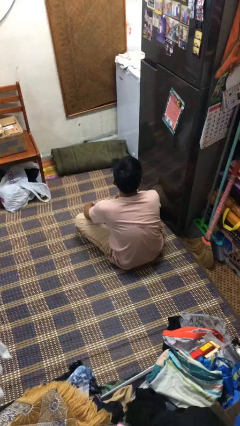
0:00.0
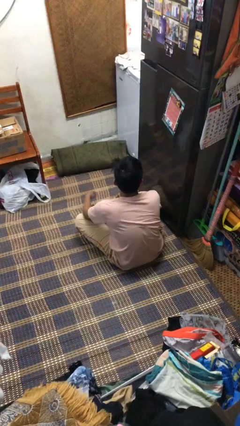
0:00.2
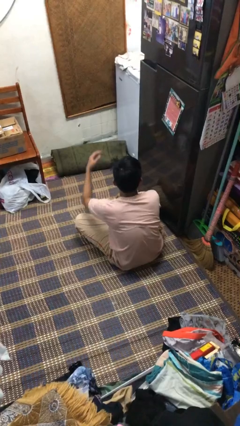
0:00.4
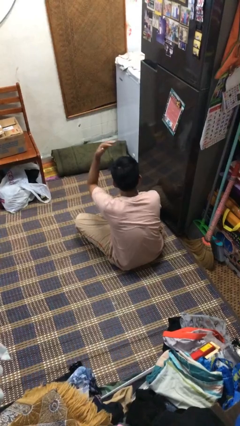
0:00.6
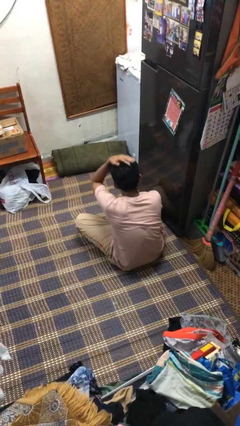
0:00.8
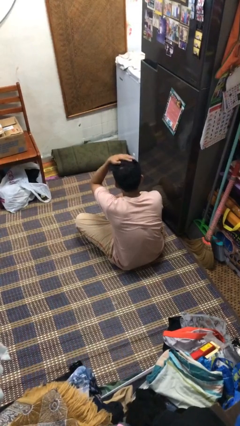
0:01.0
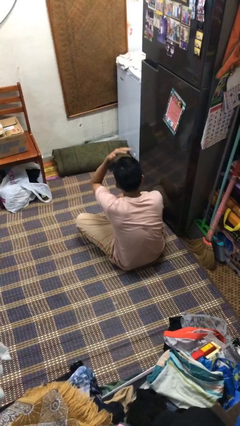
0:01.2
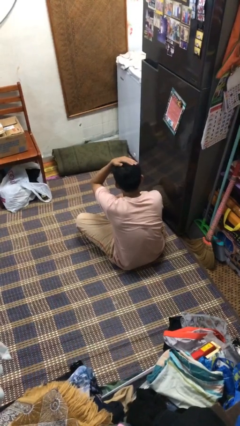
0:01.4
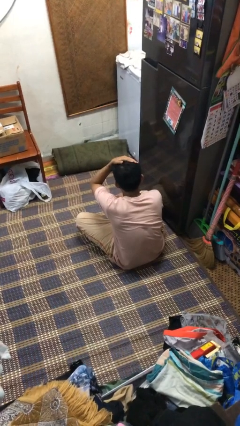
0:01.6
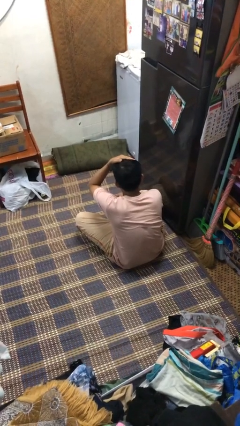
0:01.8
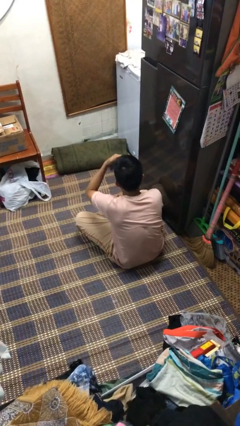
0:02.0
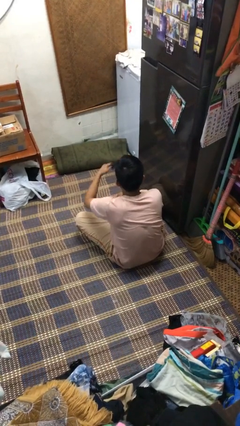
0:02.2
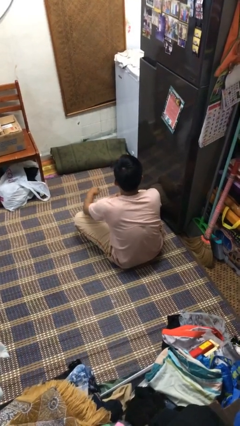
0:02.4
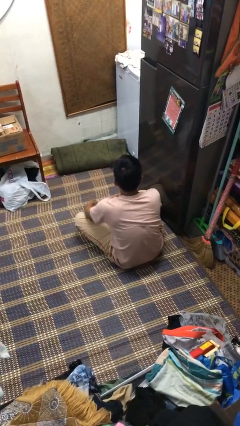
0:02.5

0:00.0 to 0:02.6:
person pats head

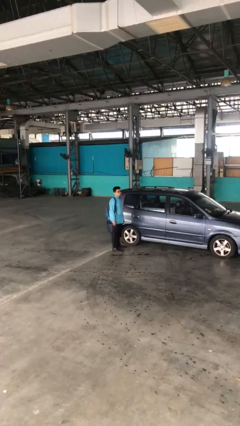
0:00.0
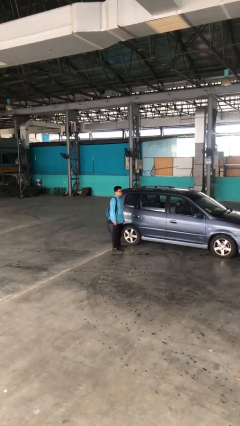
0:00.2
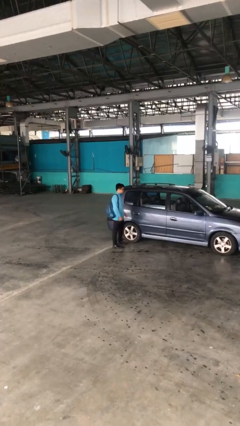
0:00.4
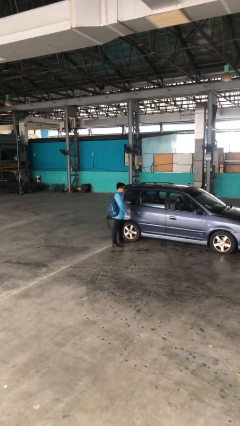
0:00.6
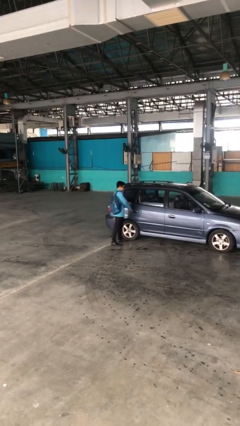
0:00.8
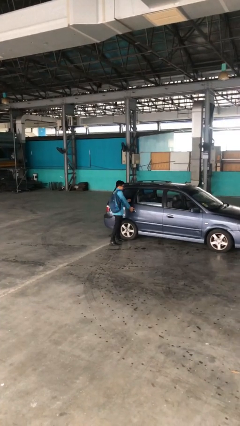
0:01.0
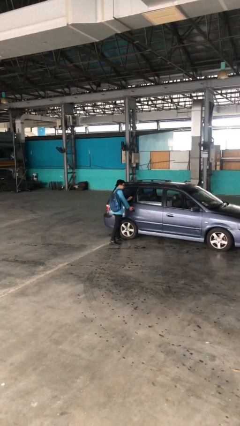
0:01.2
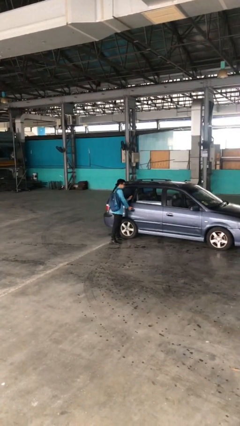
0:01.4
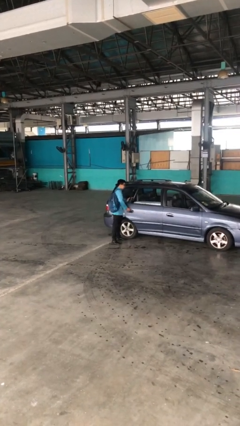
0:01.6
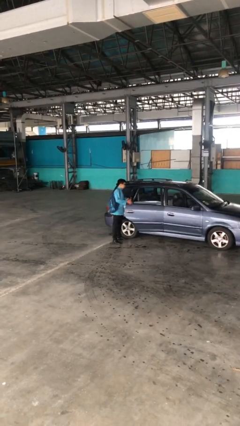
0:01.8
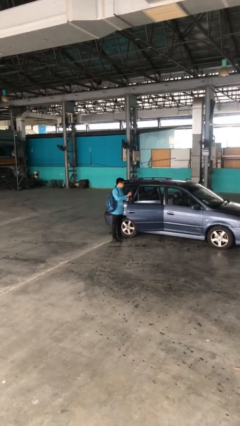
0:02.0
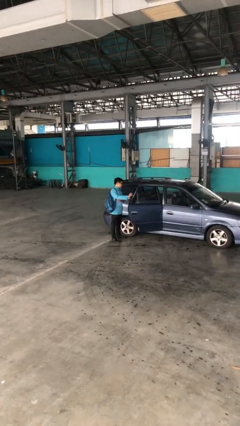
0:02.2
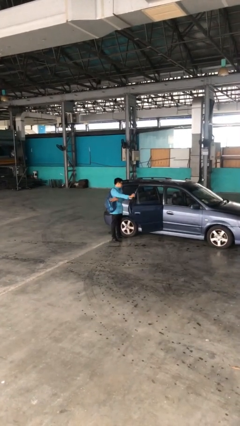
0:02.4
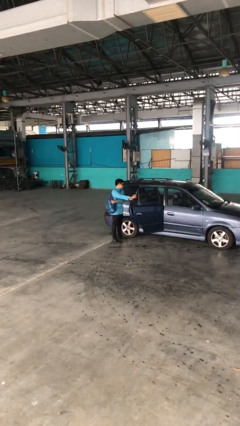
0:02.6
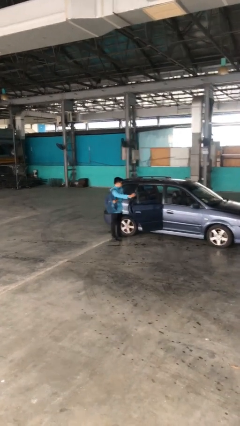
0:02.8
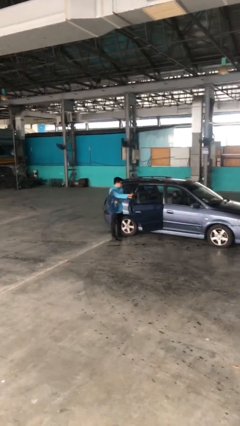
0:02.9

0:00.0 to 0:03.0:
person opens car door

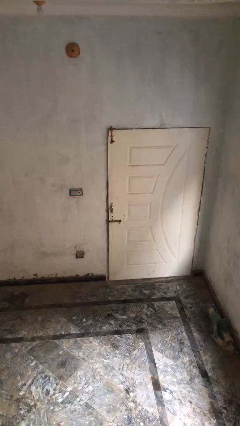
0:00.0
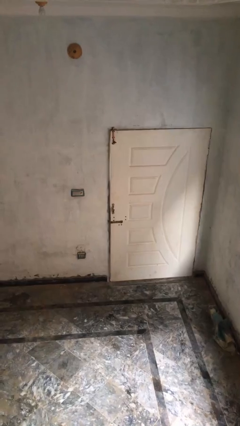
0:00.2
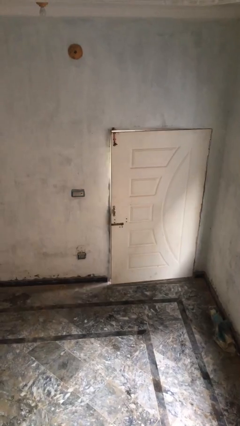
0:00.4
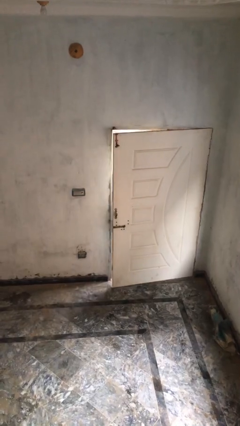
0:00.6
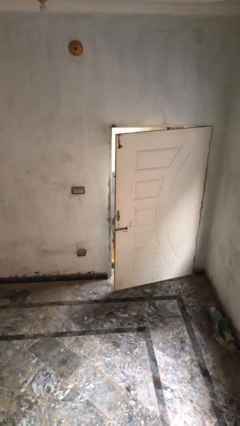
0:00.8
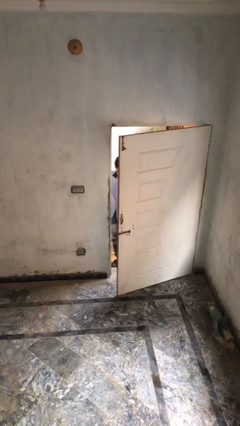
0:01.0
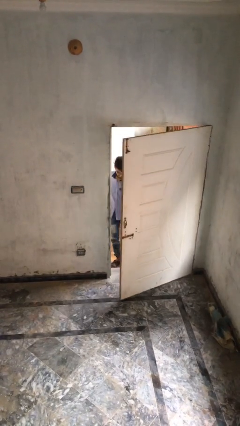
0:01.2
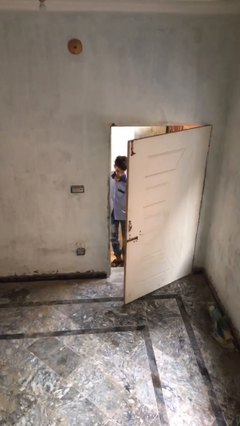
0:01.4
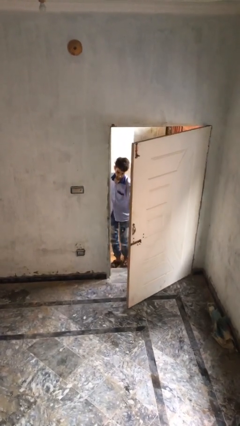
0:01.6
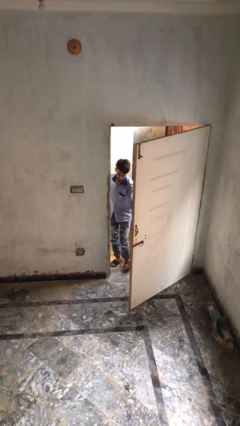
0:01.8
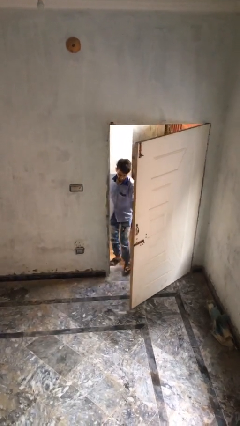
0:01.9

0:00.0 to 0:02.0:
person opens facility door

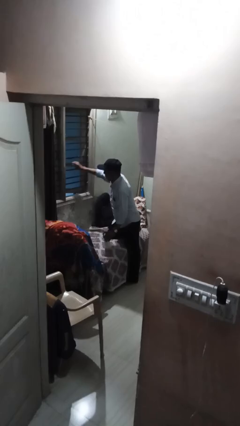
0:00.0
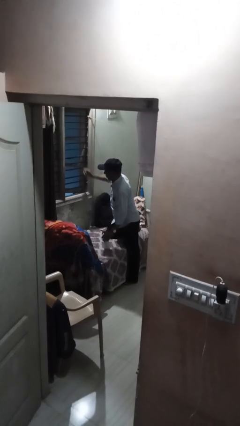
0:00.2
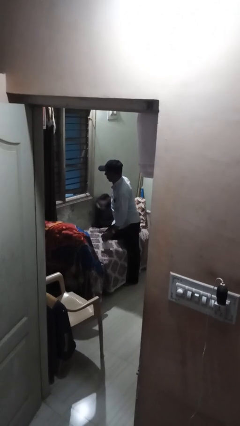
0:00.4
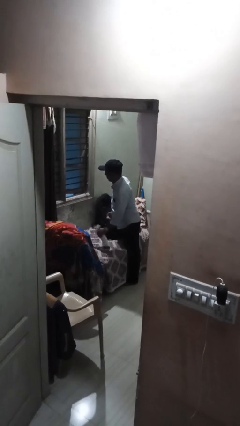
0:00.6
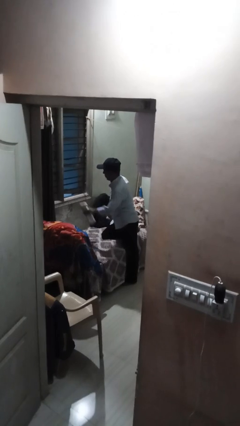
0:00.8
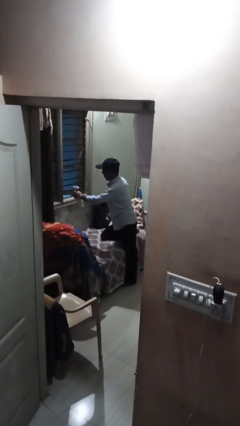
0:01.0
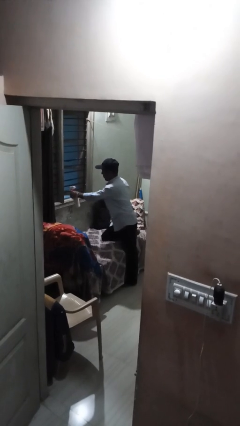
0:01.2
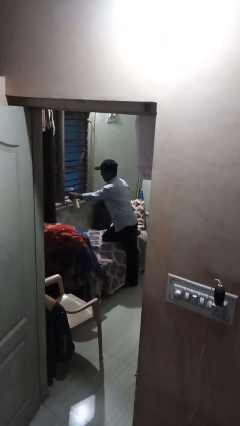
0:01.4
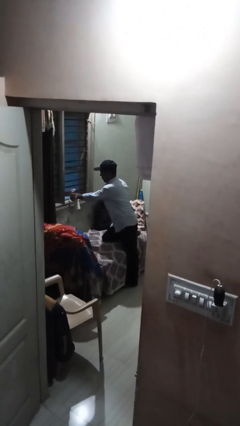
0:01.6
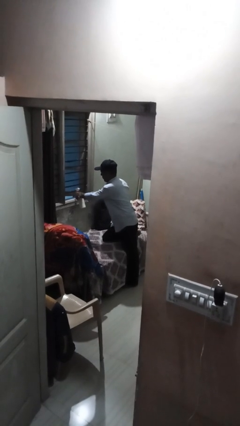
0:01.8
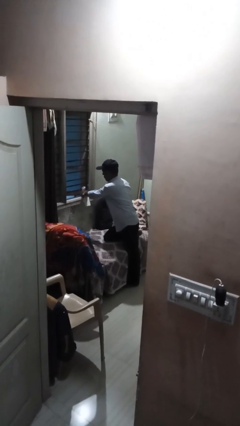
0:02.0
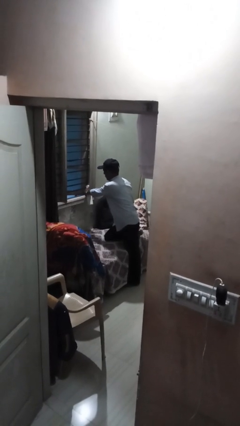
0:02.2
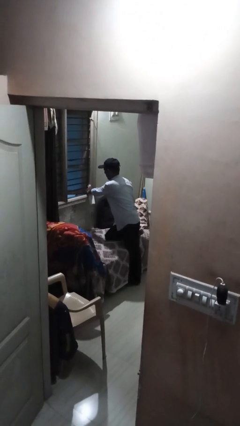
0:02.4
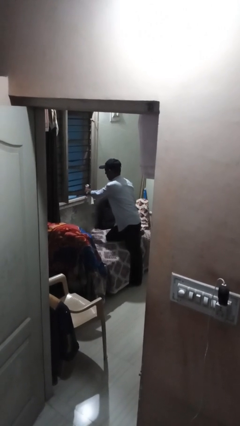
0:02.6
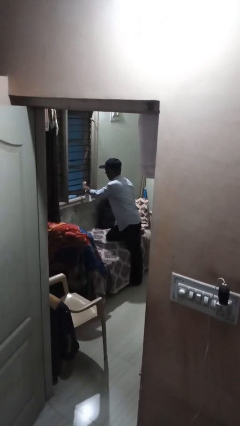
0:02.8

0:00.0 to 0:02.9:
person sprays from bottle

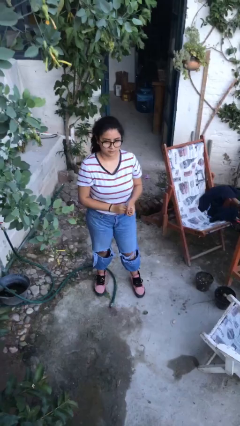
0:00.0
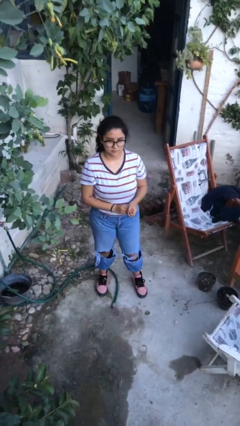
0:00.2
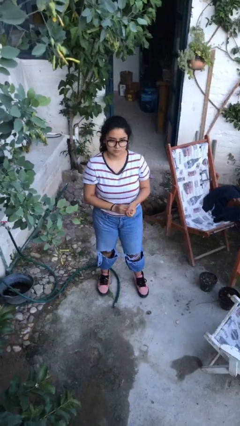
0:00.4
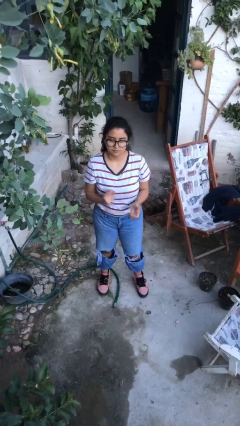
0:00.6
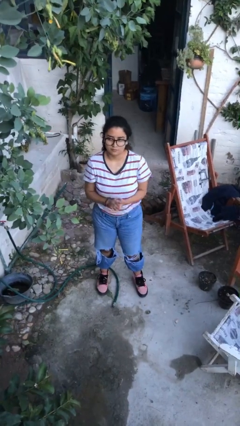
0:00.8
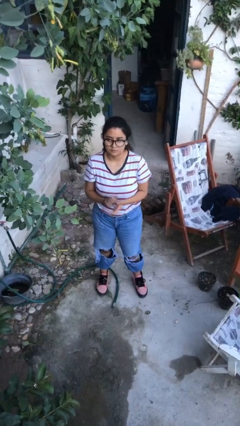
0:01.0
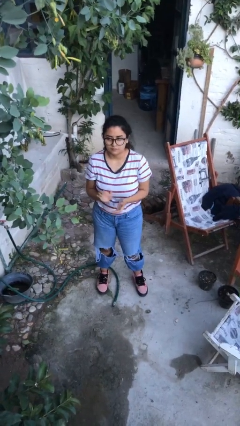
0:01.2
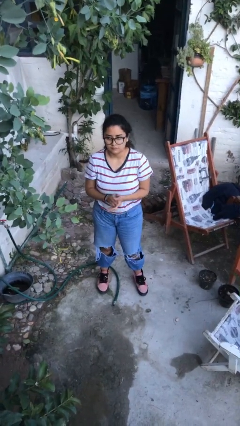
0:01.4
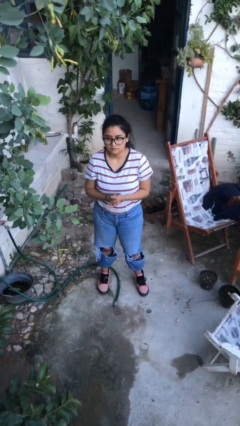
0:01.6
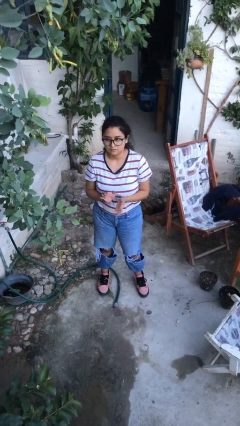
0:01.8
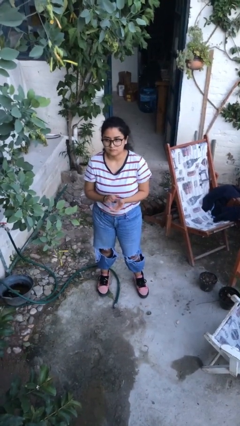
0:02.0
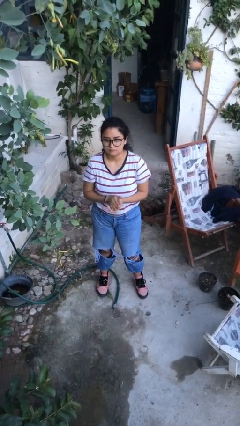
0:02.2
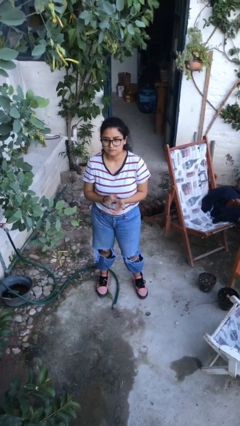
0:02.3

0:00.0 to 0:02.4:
person claps hands

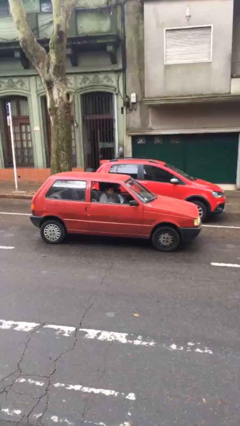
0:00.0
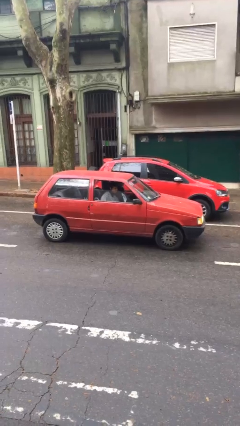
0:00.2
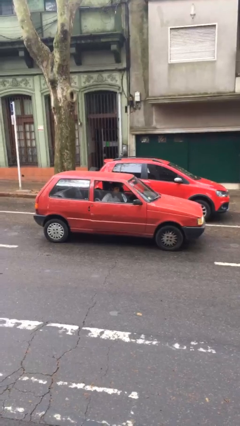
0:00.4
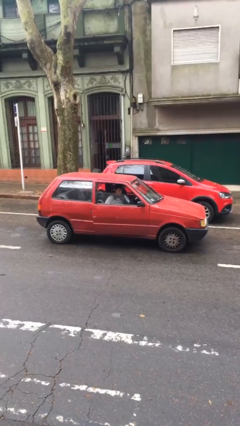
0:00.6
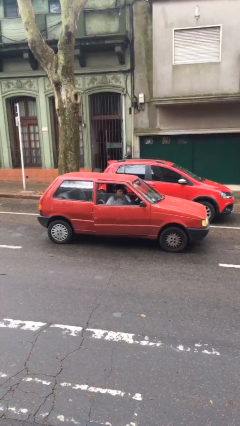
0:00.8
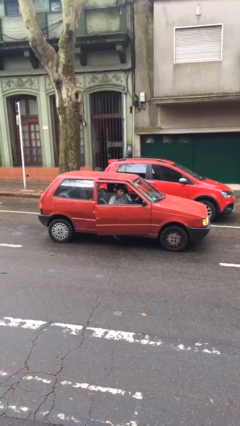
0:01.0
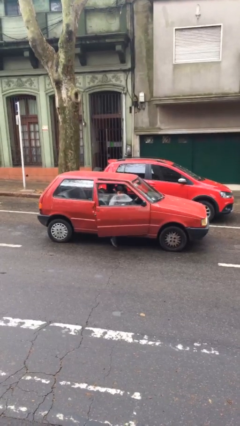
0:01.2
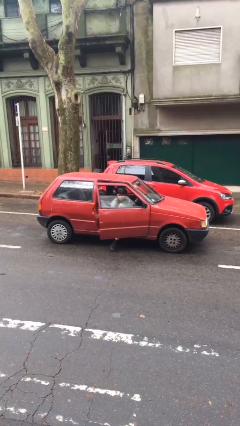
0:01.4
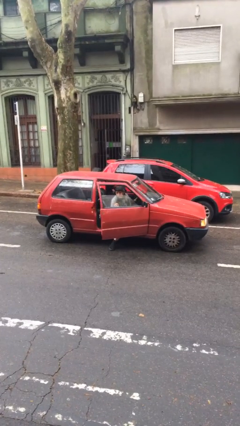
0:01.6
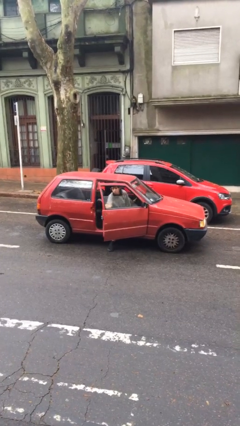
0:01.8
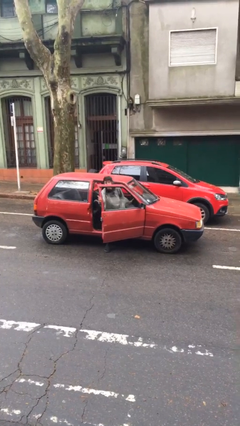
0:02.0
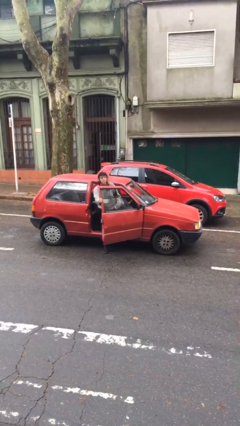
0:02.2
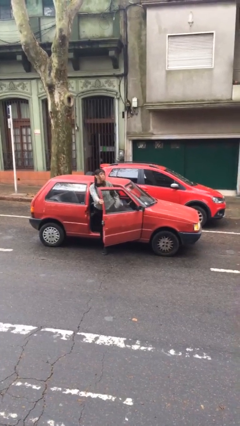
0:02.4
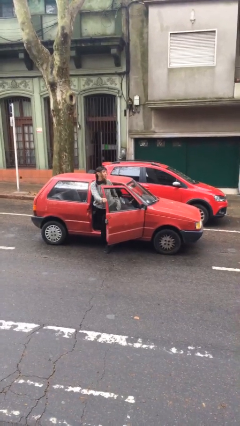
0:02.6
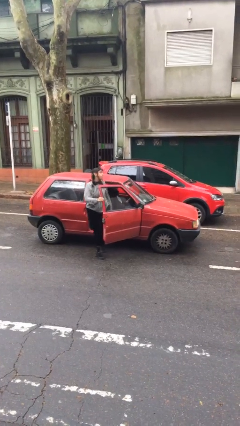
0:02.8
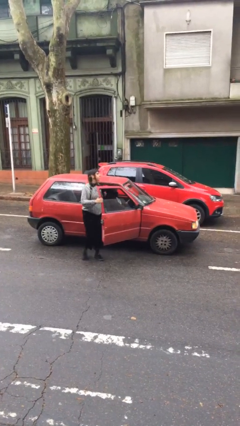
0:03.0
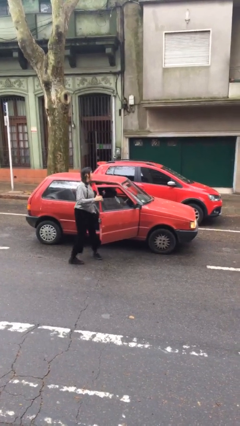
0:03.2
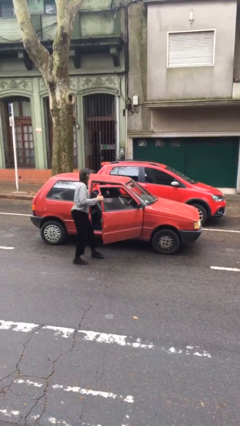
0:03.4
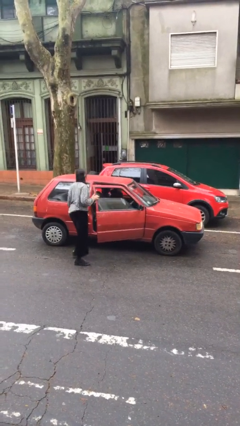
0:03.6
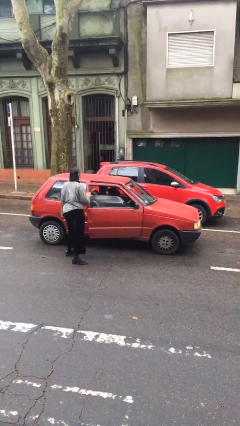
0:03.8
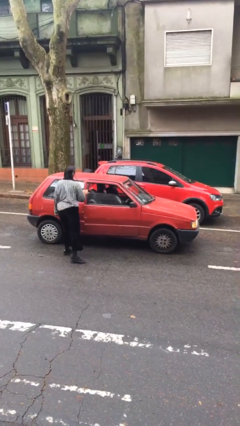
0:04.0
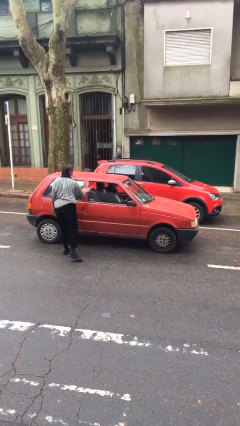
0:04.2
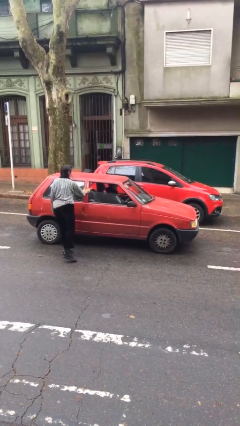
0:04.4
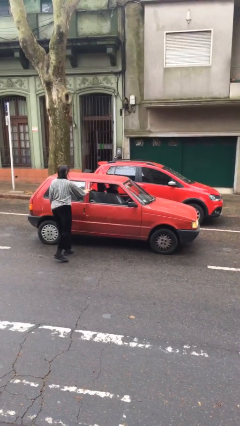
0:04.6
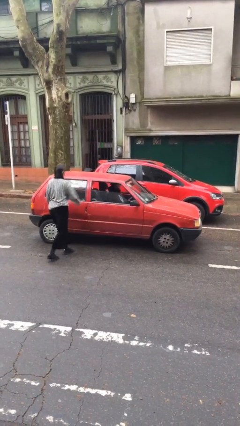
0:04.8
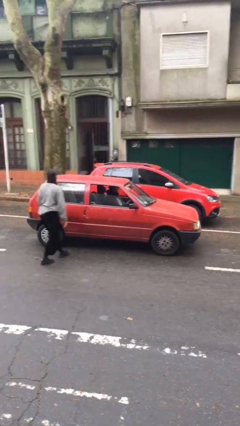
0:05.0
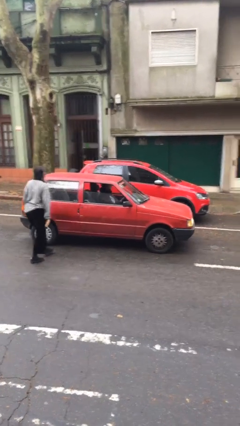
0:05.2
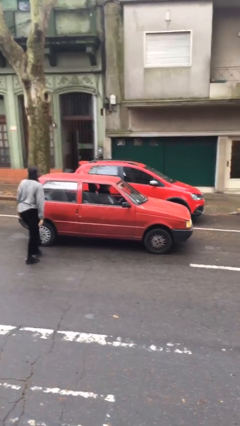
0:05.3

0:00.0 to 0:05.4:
car drops off person
